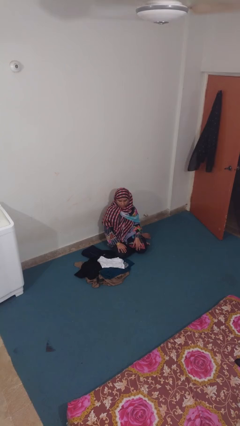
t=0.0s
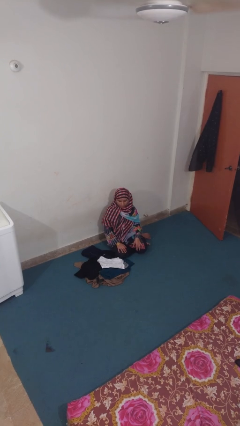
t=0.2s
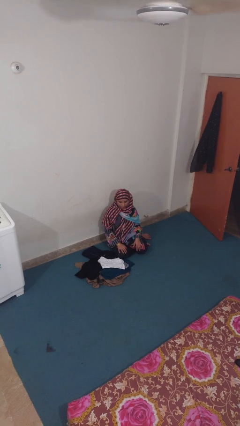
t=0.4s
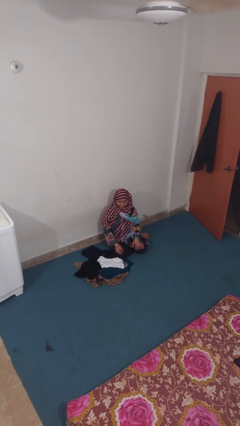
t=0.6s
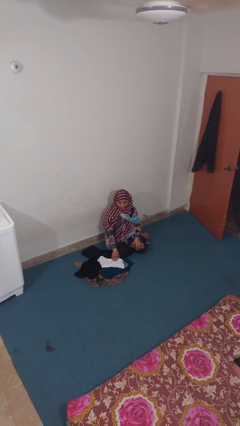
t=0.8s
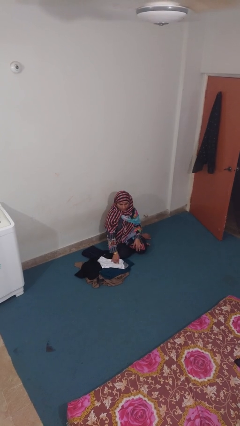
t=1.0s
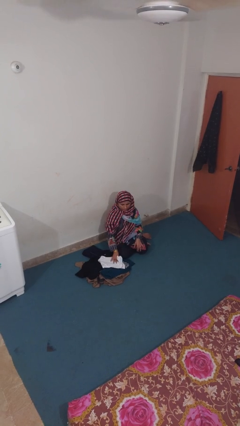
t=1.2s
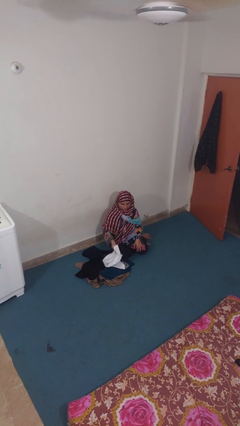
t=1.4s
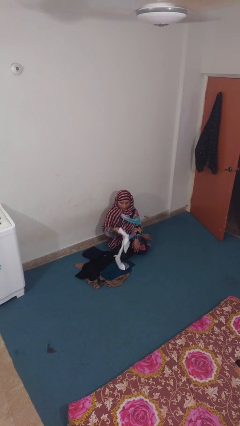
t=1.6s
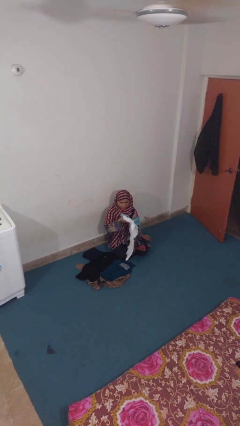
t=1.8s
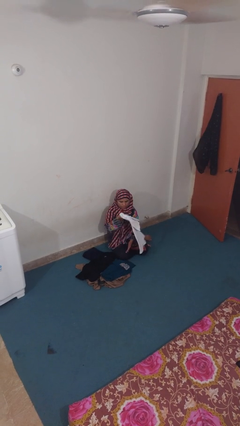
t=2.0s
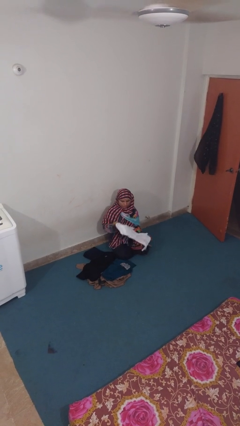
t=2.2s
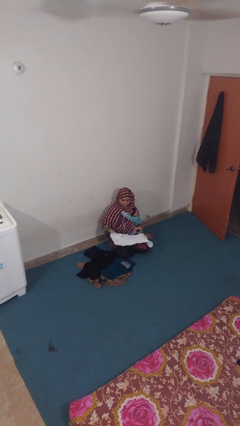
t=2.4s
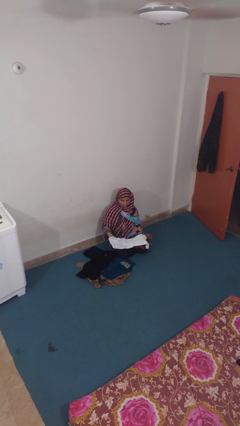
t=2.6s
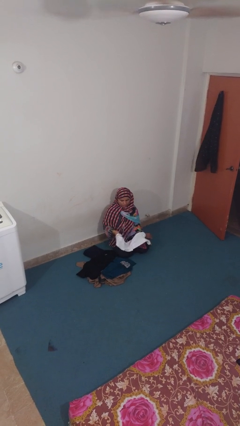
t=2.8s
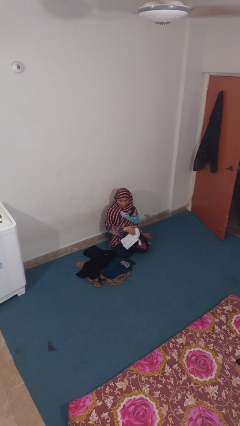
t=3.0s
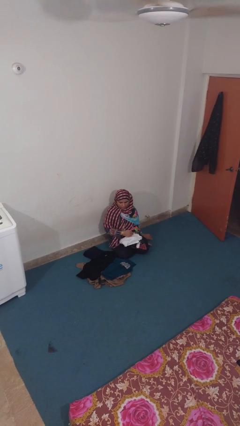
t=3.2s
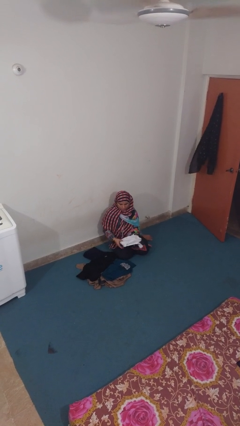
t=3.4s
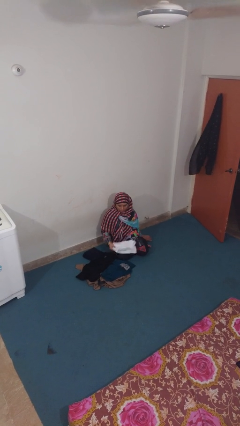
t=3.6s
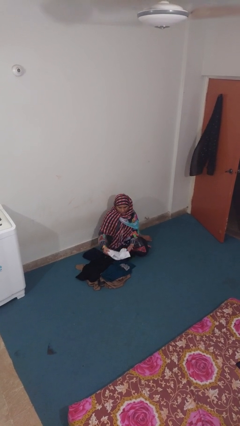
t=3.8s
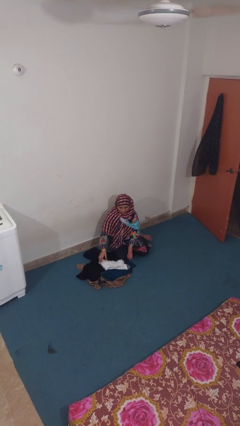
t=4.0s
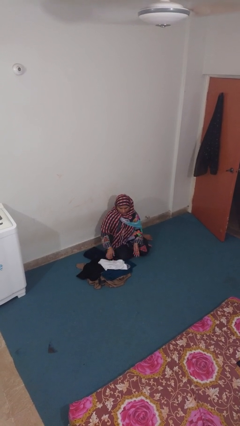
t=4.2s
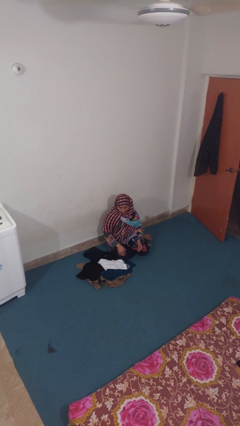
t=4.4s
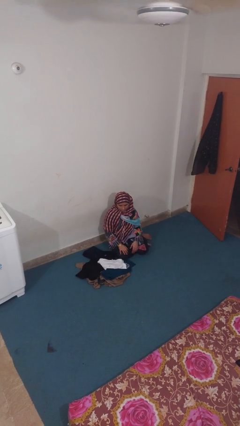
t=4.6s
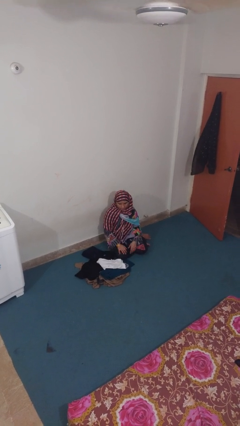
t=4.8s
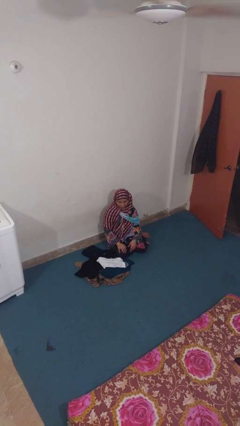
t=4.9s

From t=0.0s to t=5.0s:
person folds shirt

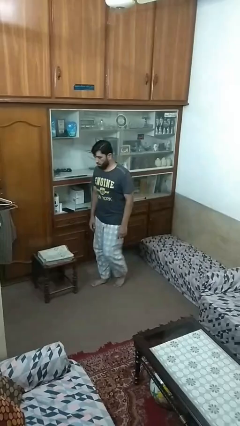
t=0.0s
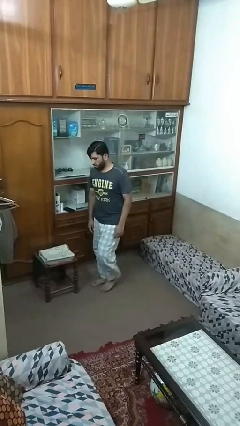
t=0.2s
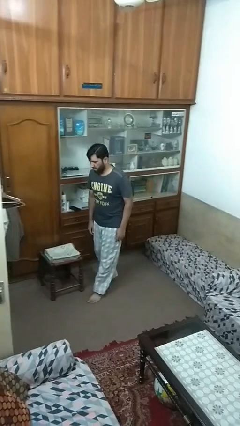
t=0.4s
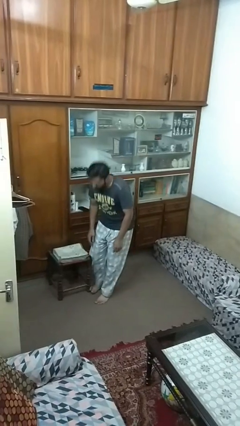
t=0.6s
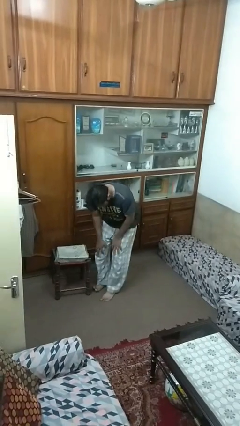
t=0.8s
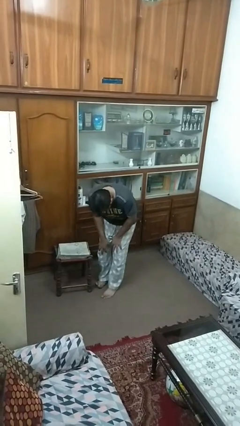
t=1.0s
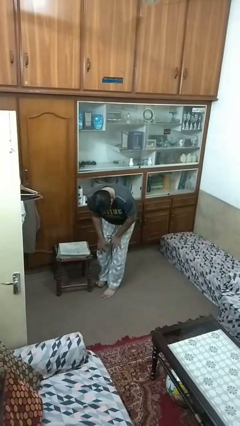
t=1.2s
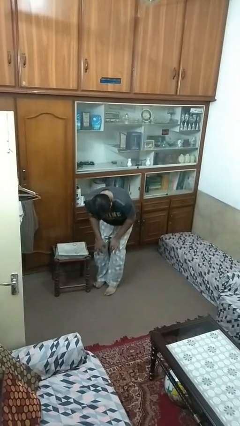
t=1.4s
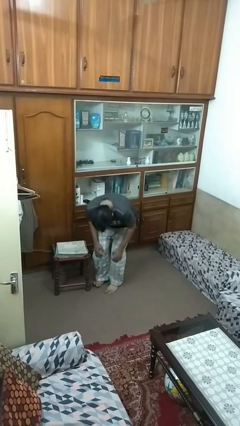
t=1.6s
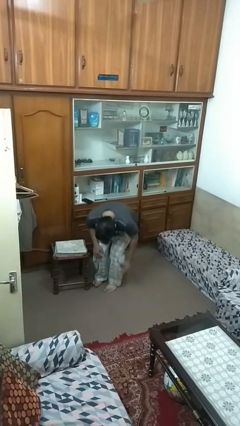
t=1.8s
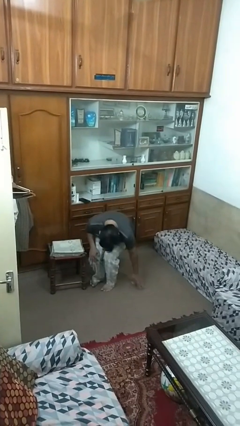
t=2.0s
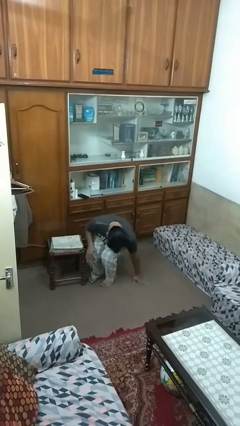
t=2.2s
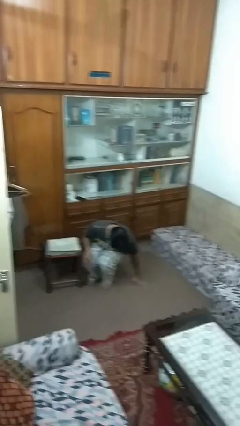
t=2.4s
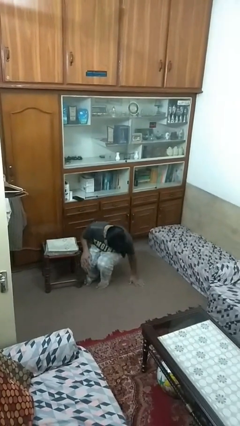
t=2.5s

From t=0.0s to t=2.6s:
person trips on object on floor

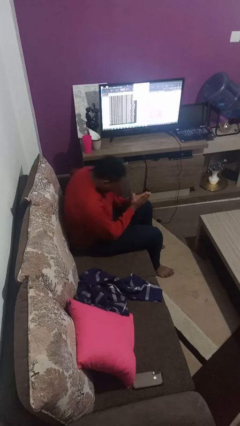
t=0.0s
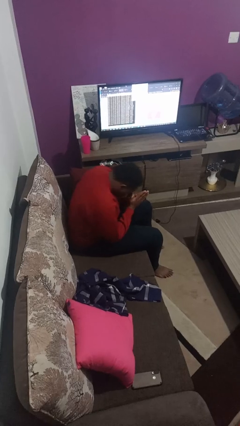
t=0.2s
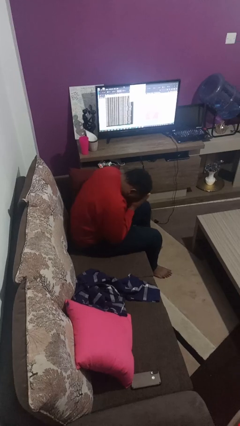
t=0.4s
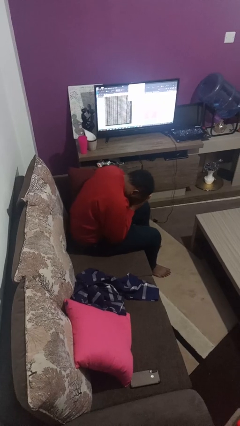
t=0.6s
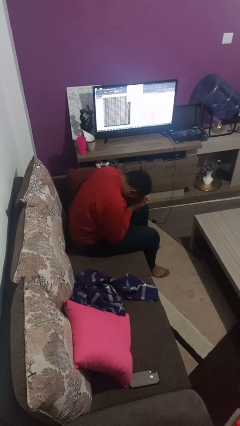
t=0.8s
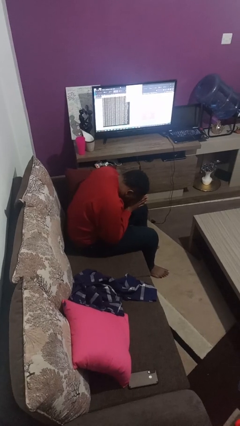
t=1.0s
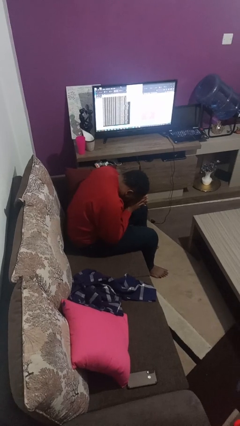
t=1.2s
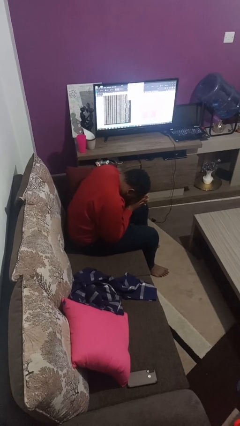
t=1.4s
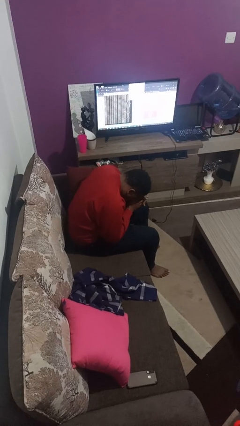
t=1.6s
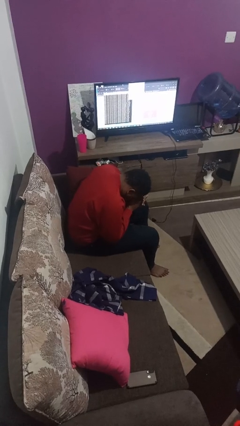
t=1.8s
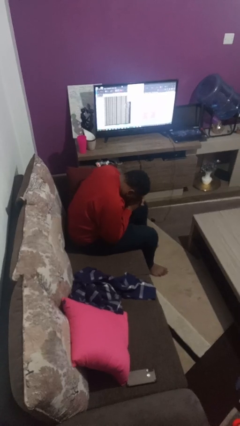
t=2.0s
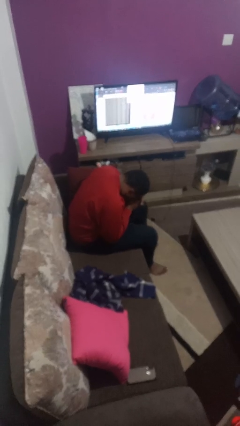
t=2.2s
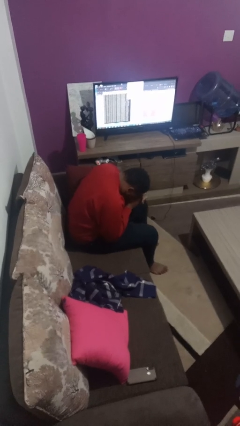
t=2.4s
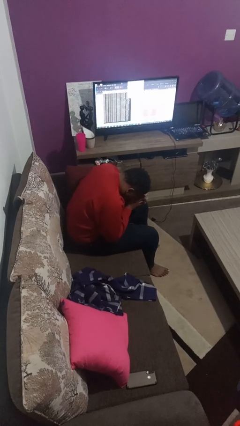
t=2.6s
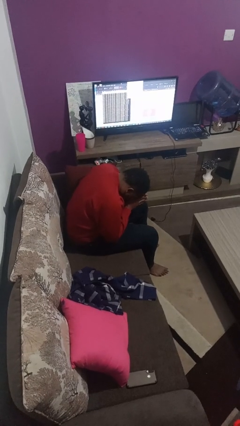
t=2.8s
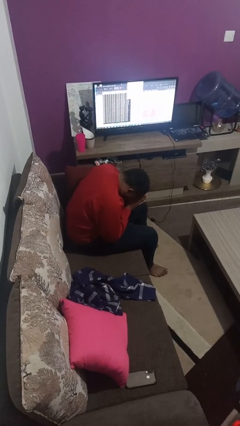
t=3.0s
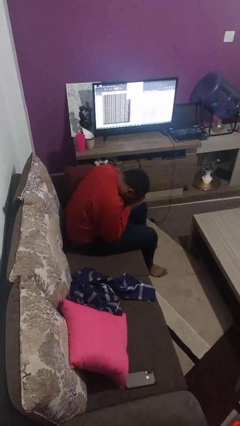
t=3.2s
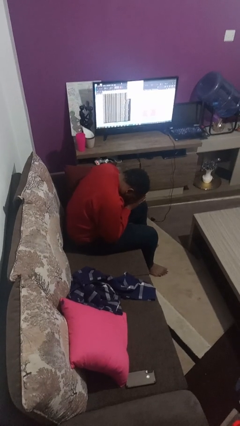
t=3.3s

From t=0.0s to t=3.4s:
person prays

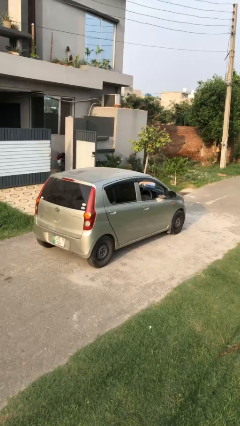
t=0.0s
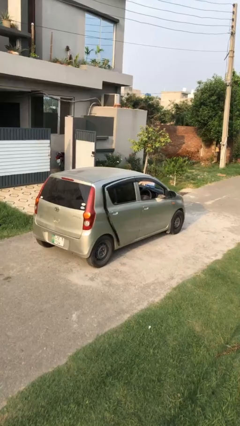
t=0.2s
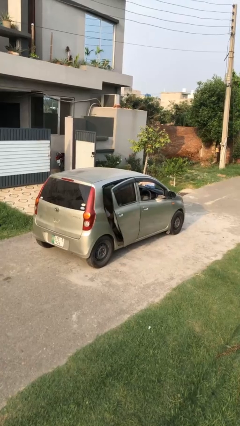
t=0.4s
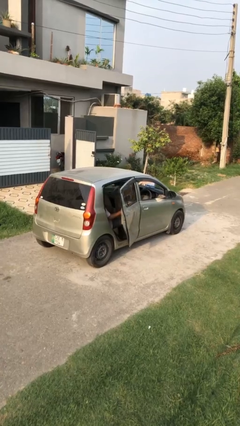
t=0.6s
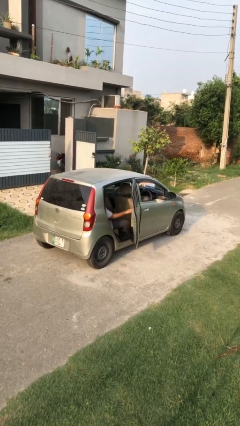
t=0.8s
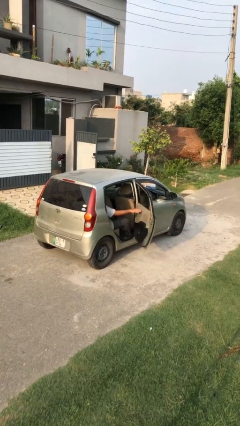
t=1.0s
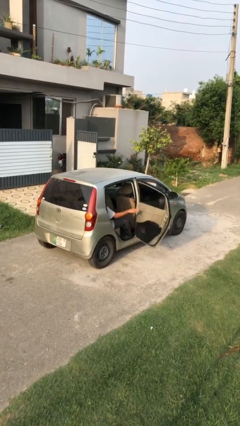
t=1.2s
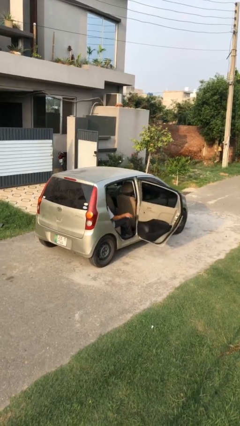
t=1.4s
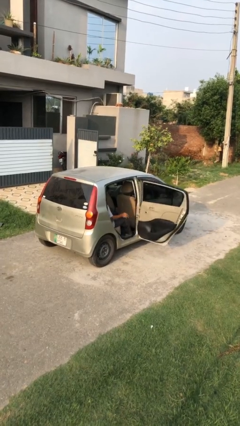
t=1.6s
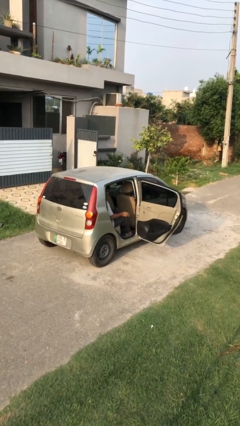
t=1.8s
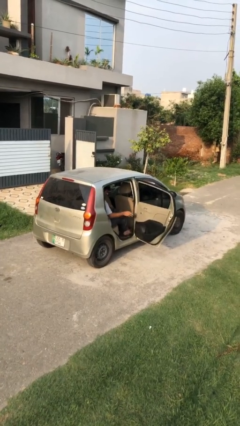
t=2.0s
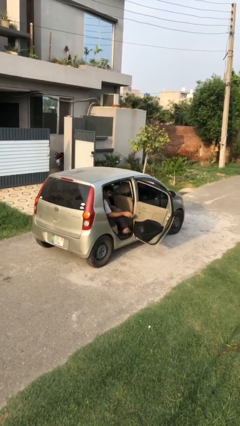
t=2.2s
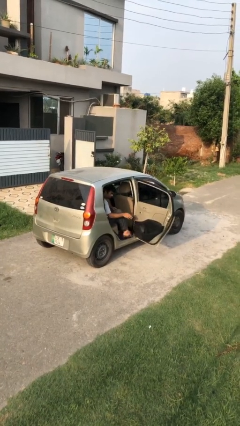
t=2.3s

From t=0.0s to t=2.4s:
person opens car door

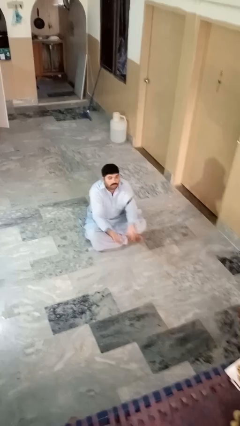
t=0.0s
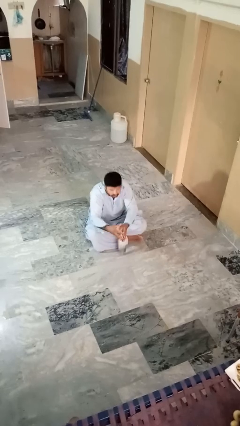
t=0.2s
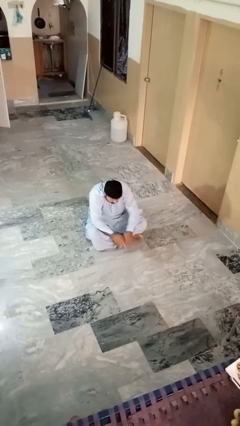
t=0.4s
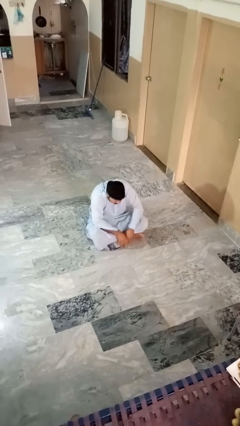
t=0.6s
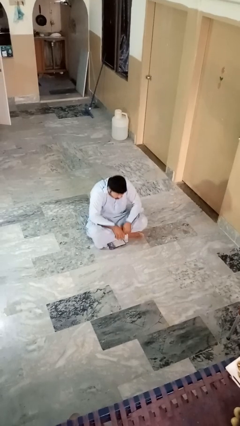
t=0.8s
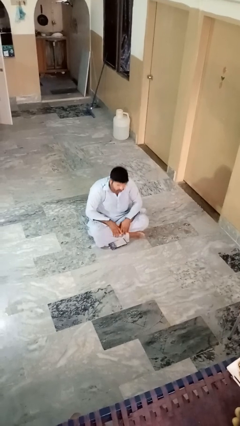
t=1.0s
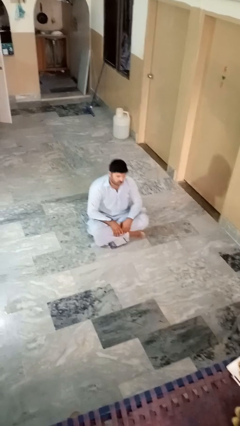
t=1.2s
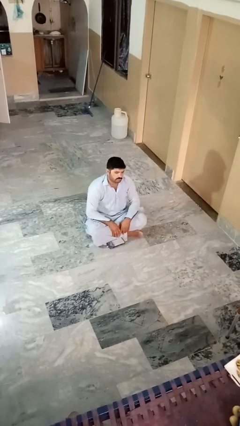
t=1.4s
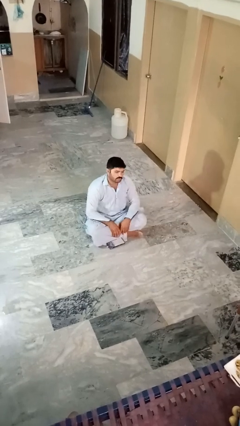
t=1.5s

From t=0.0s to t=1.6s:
person catches dropped object

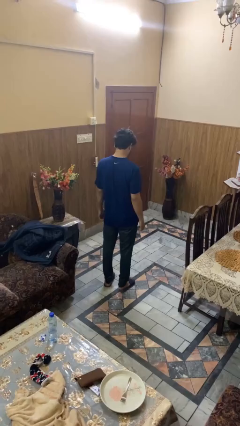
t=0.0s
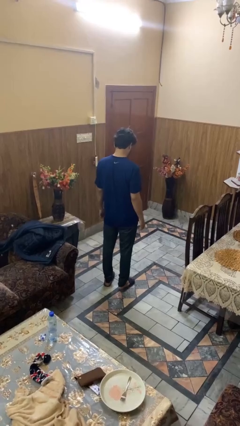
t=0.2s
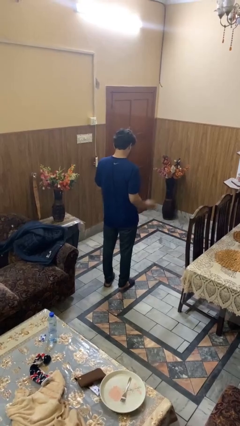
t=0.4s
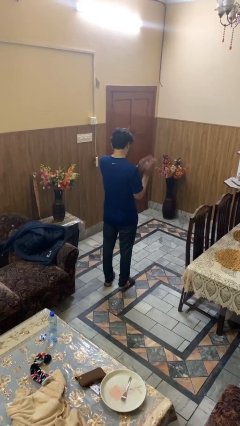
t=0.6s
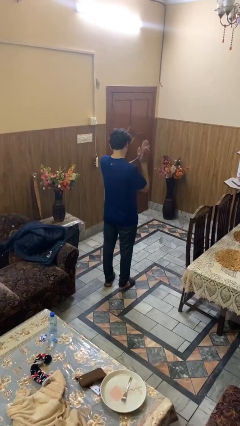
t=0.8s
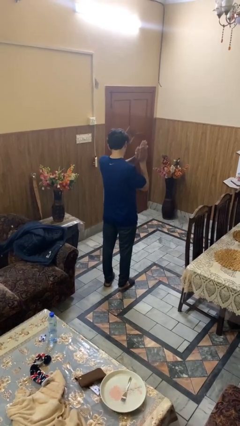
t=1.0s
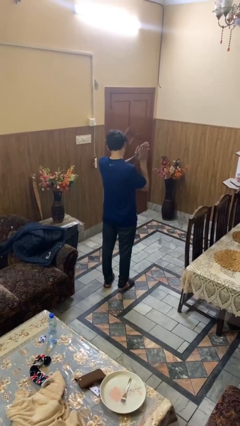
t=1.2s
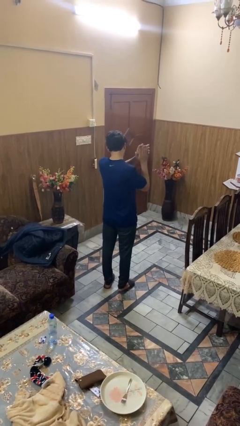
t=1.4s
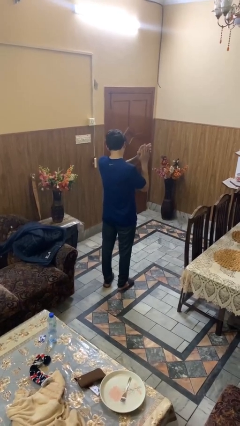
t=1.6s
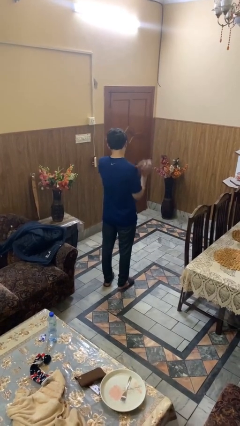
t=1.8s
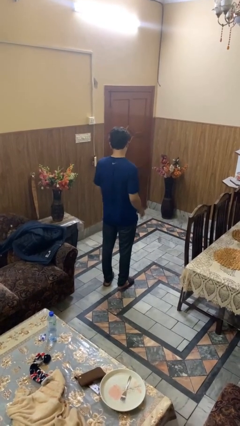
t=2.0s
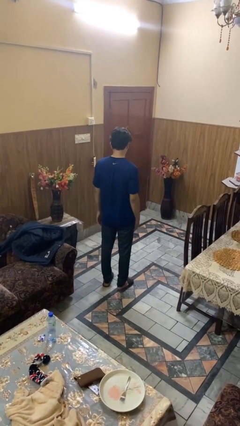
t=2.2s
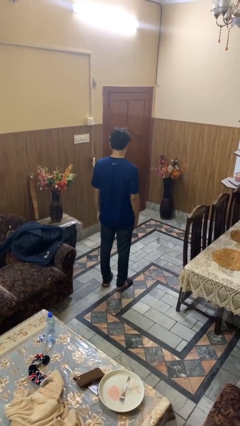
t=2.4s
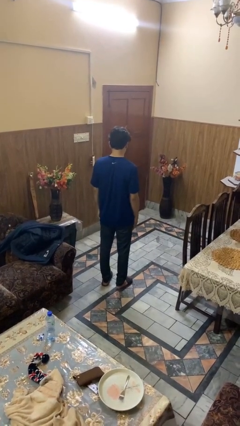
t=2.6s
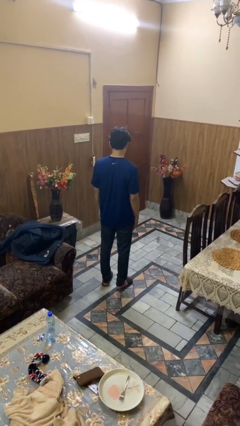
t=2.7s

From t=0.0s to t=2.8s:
person claps hands
